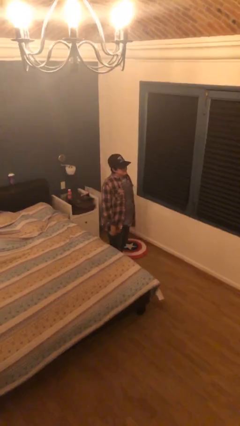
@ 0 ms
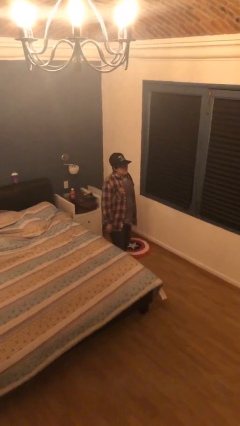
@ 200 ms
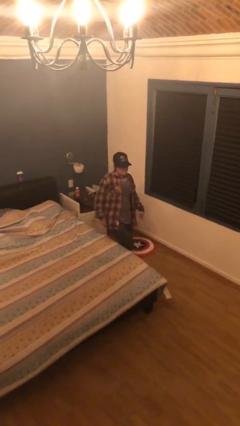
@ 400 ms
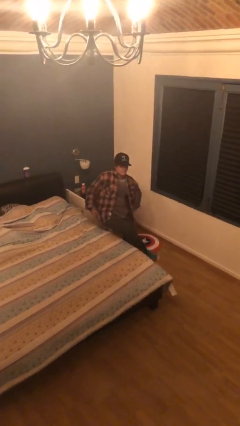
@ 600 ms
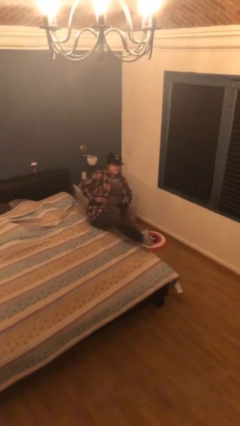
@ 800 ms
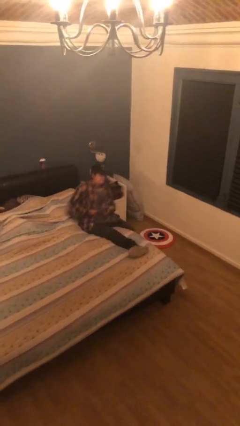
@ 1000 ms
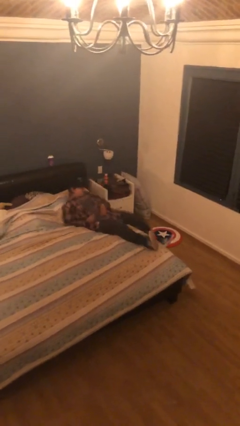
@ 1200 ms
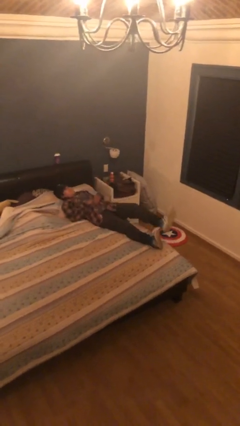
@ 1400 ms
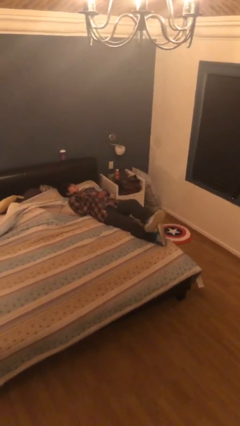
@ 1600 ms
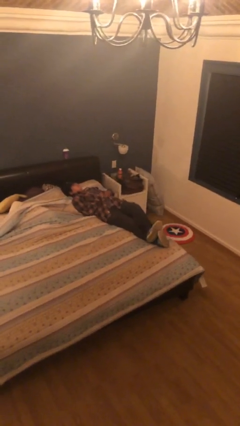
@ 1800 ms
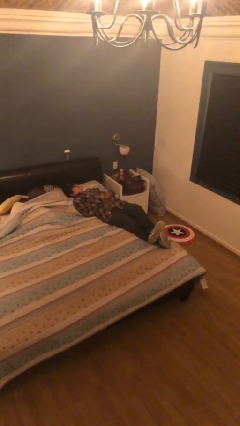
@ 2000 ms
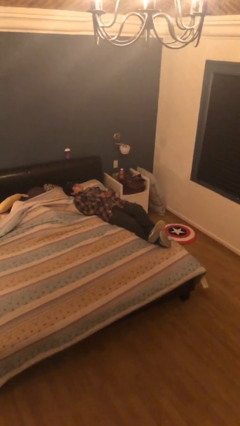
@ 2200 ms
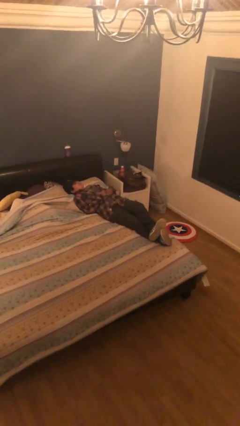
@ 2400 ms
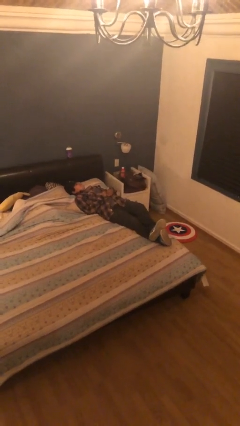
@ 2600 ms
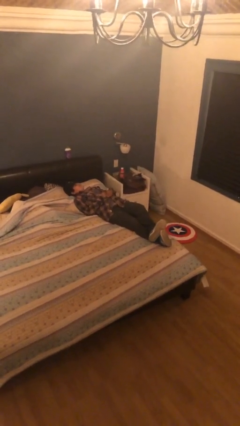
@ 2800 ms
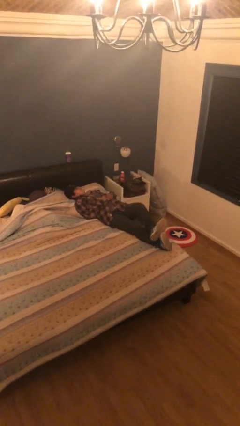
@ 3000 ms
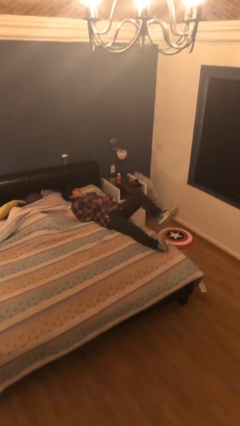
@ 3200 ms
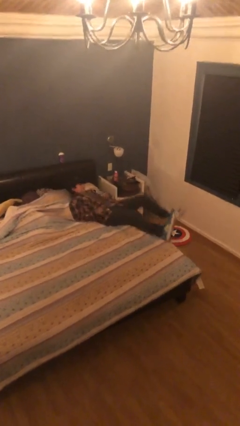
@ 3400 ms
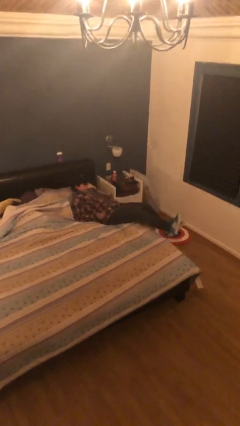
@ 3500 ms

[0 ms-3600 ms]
person lies down on bed

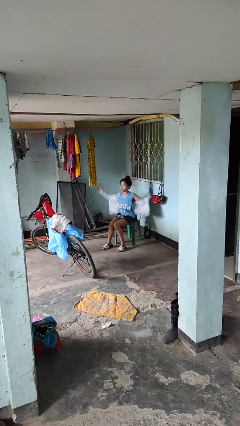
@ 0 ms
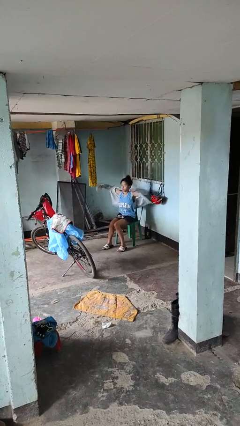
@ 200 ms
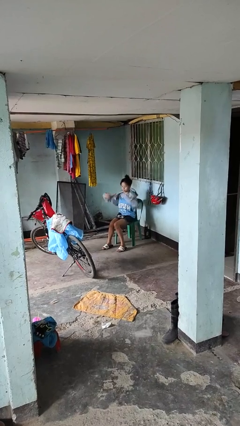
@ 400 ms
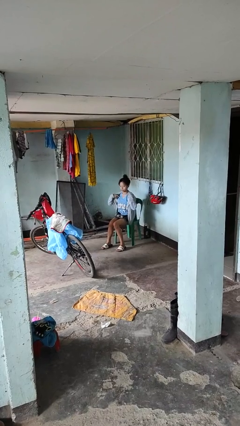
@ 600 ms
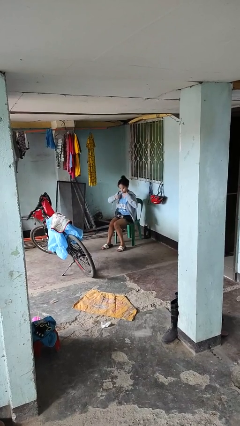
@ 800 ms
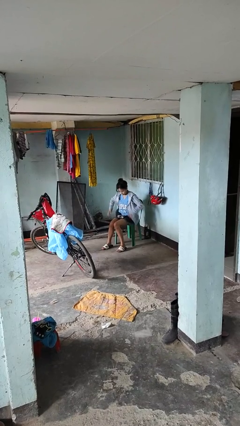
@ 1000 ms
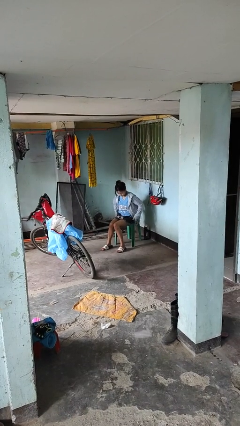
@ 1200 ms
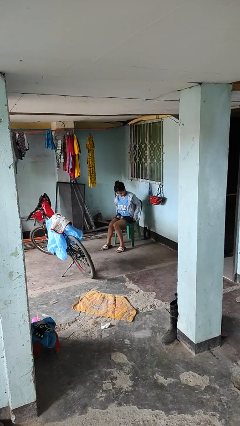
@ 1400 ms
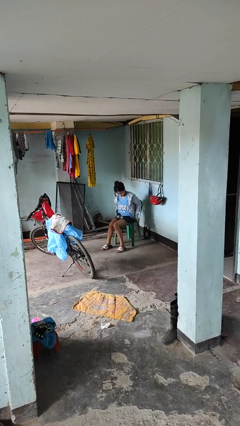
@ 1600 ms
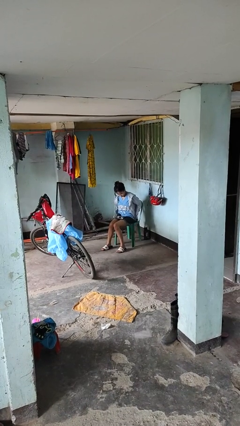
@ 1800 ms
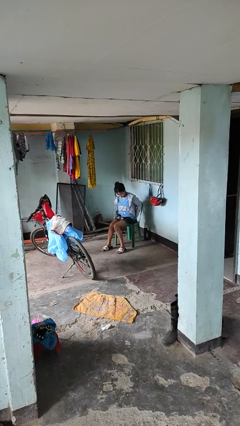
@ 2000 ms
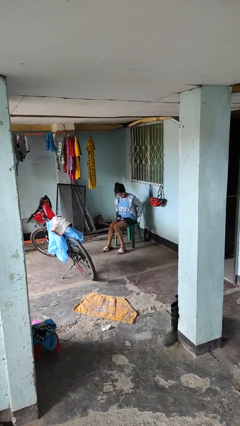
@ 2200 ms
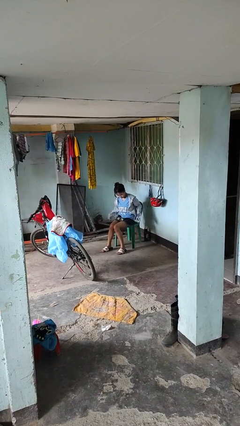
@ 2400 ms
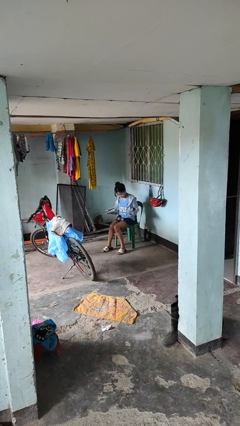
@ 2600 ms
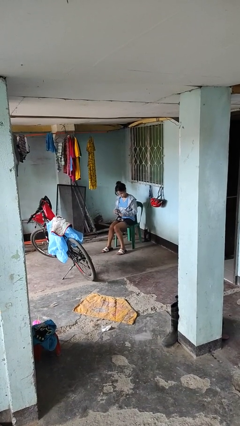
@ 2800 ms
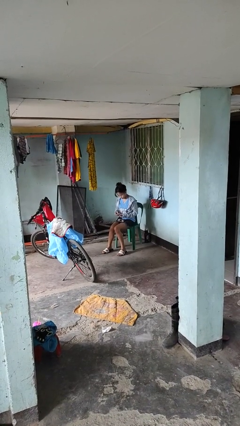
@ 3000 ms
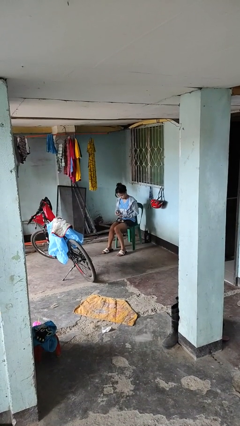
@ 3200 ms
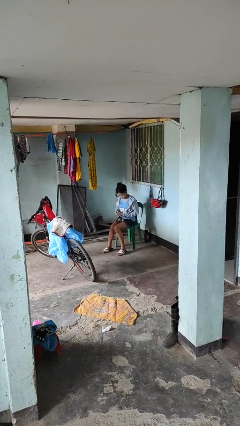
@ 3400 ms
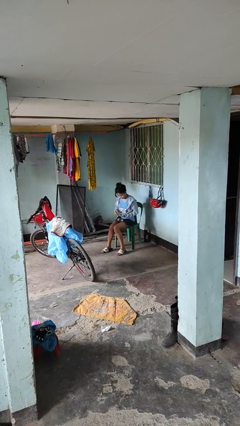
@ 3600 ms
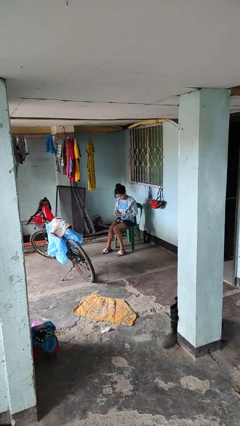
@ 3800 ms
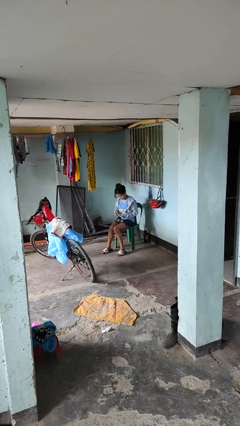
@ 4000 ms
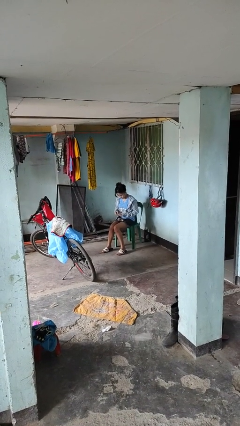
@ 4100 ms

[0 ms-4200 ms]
person puts on jacket

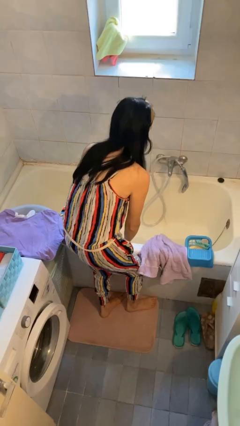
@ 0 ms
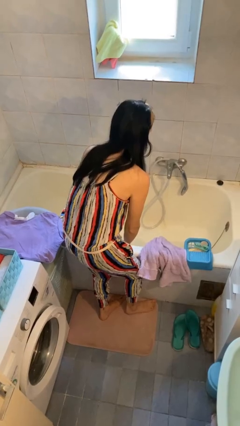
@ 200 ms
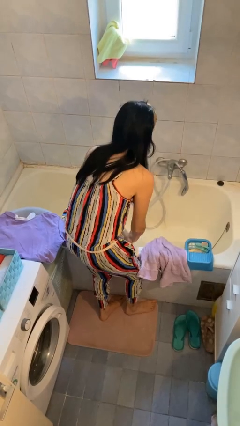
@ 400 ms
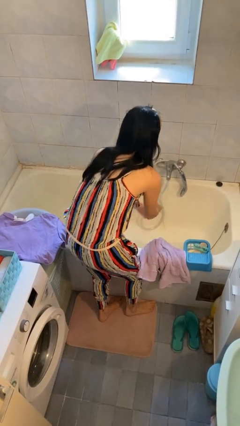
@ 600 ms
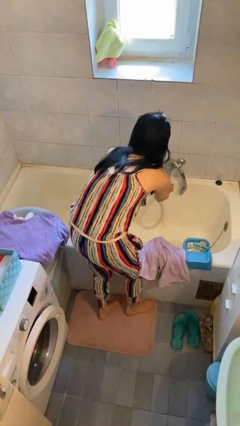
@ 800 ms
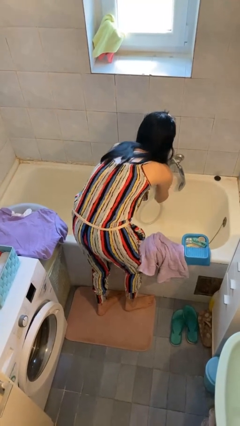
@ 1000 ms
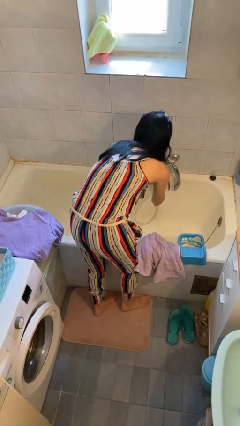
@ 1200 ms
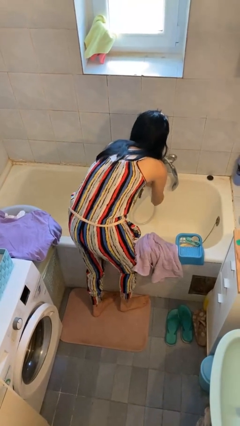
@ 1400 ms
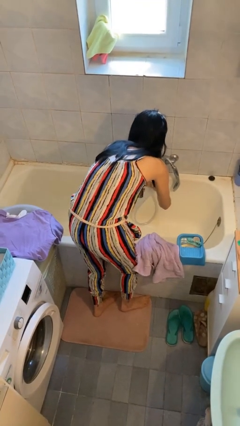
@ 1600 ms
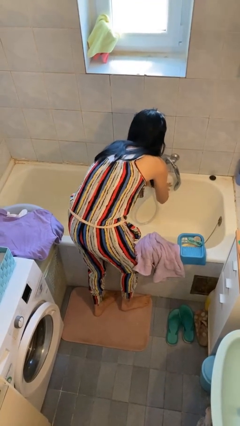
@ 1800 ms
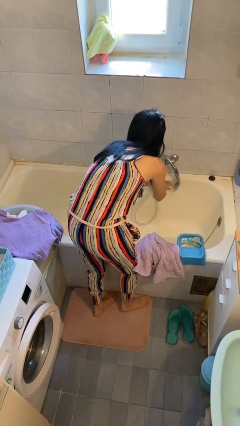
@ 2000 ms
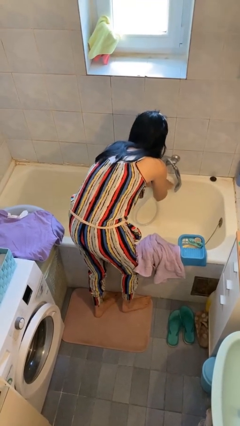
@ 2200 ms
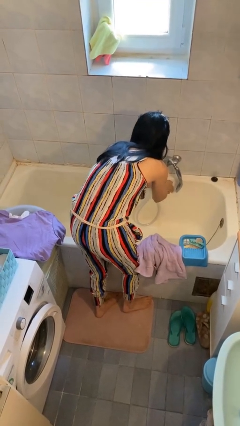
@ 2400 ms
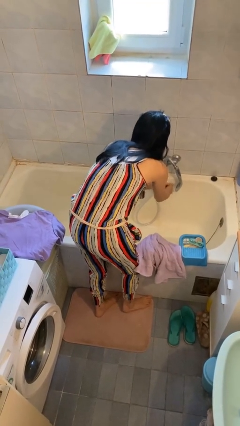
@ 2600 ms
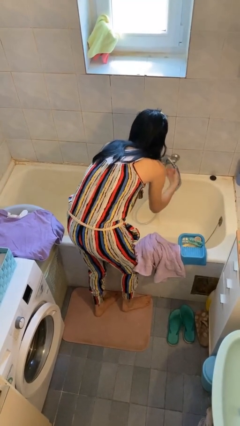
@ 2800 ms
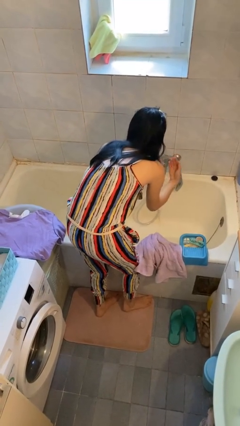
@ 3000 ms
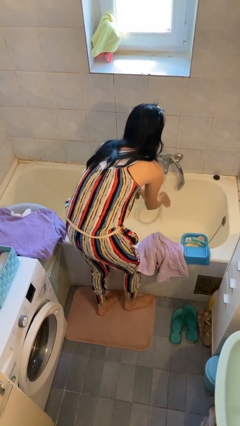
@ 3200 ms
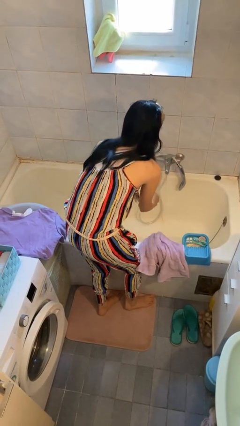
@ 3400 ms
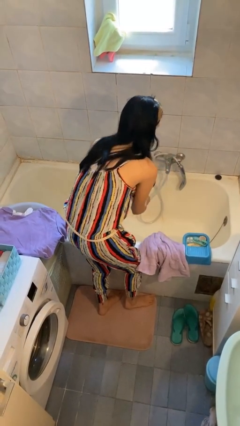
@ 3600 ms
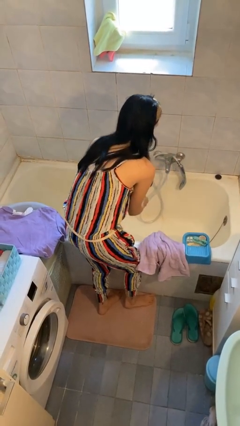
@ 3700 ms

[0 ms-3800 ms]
person washes hands

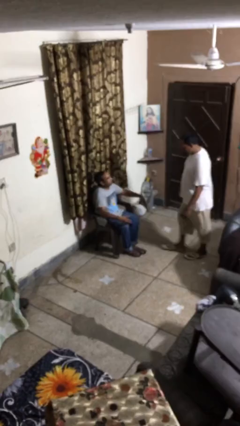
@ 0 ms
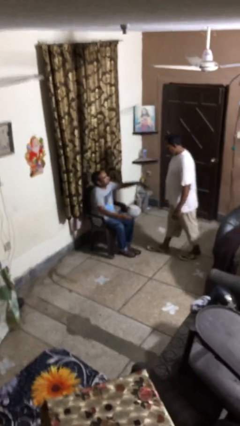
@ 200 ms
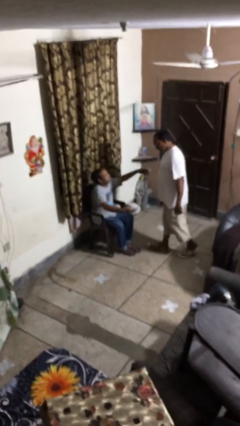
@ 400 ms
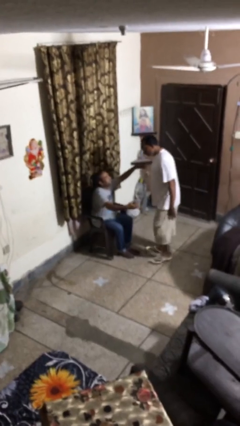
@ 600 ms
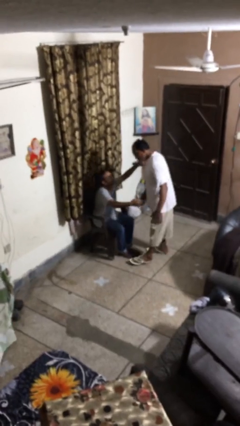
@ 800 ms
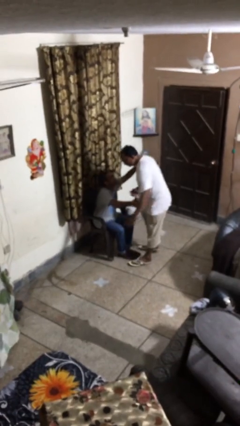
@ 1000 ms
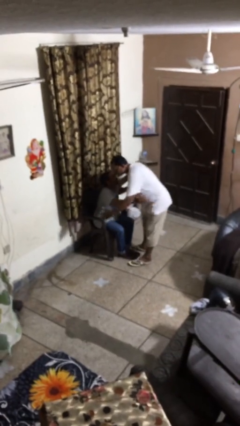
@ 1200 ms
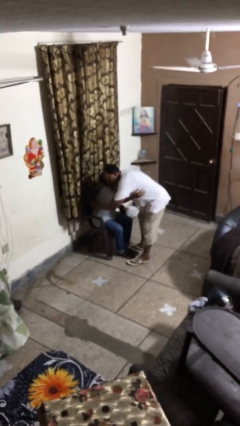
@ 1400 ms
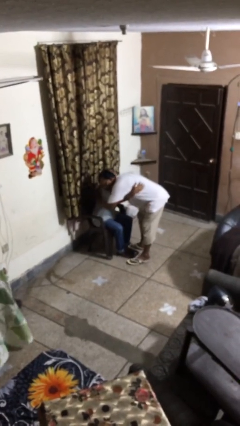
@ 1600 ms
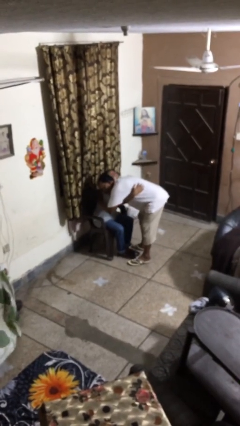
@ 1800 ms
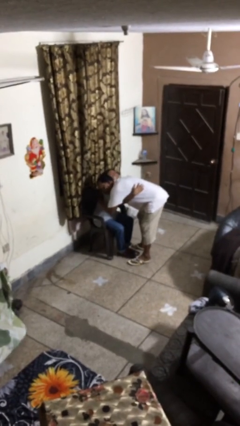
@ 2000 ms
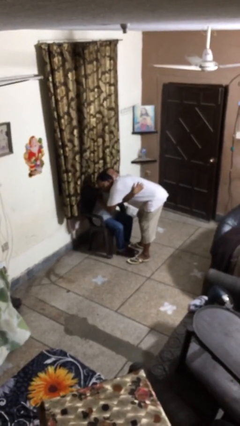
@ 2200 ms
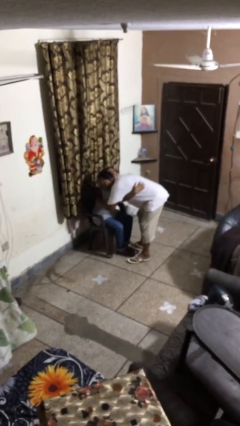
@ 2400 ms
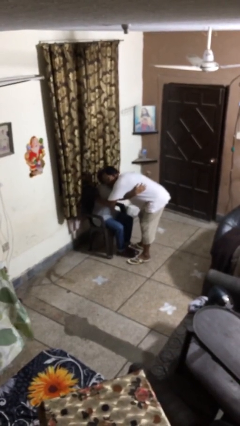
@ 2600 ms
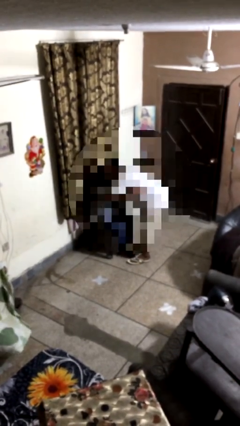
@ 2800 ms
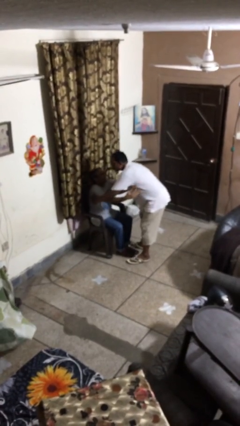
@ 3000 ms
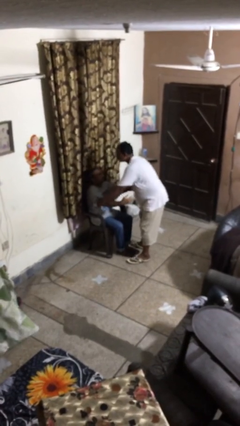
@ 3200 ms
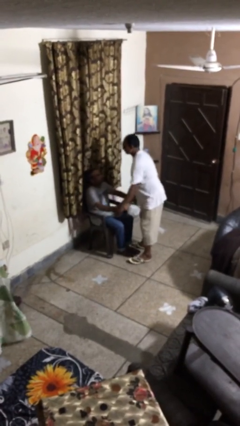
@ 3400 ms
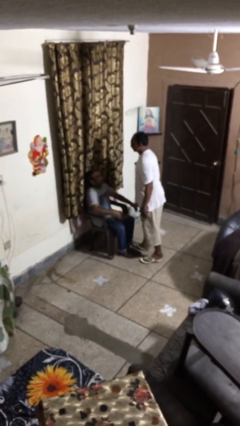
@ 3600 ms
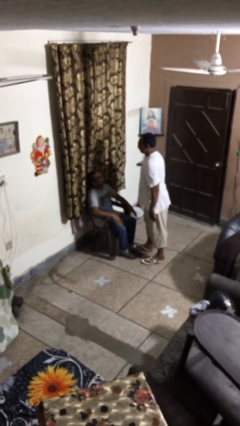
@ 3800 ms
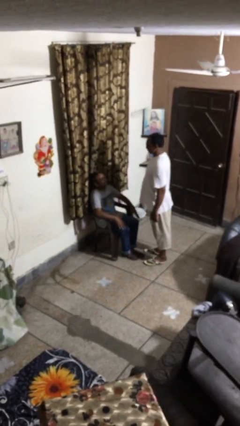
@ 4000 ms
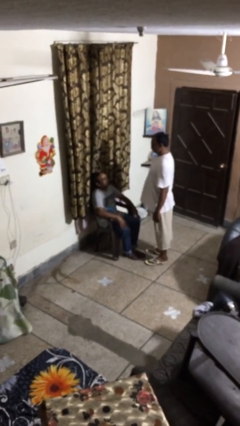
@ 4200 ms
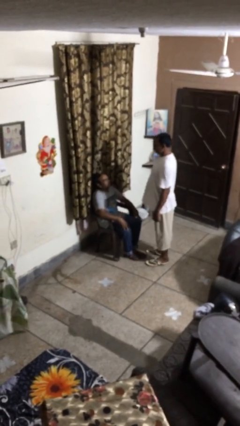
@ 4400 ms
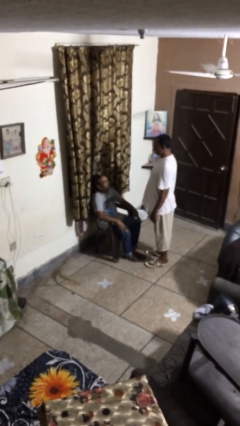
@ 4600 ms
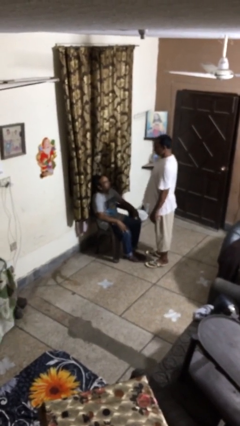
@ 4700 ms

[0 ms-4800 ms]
person embraces person

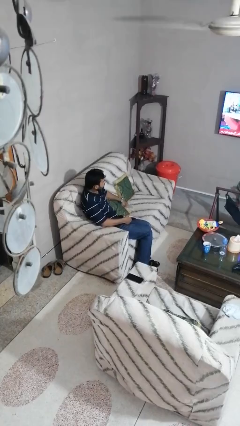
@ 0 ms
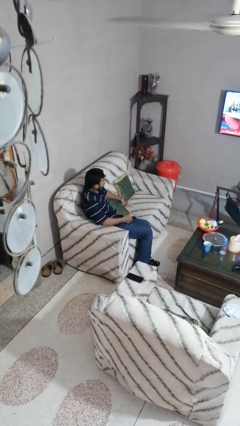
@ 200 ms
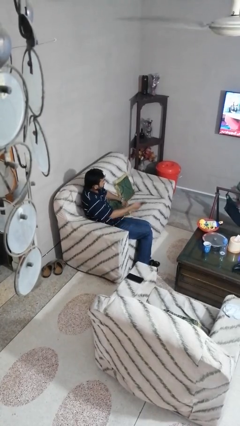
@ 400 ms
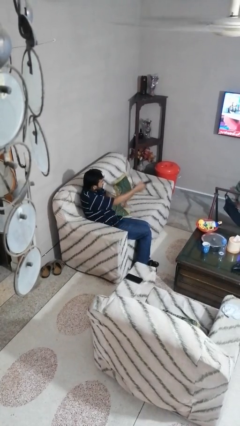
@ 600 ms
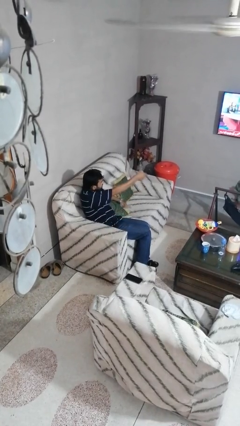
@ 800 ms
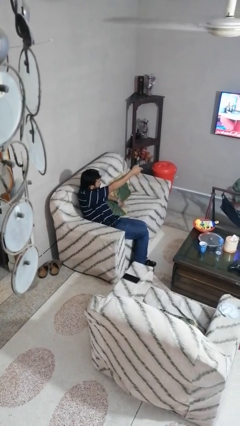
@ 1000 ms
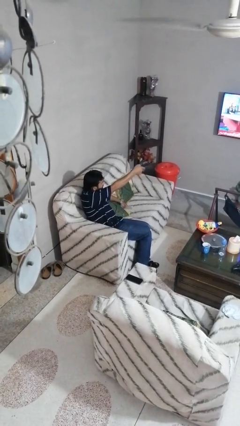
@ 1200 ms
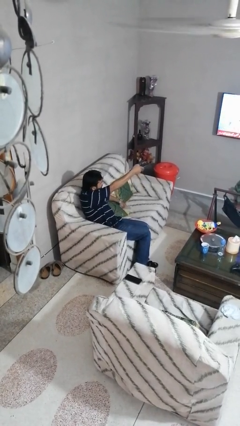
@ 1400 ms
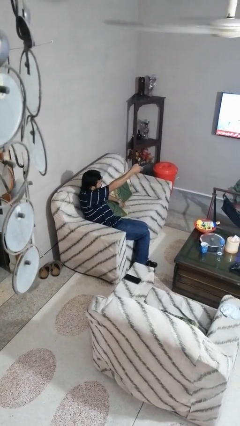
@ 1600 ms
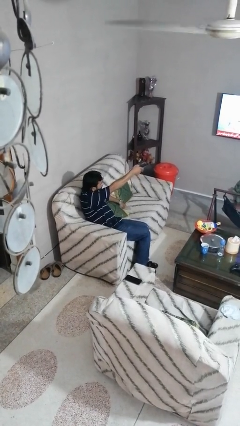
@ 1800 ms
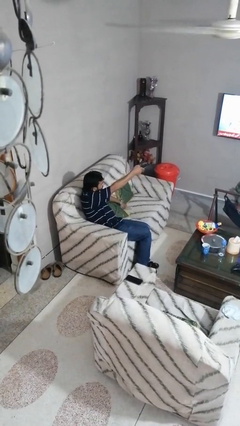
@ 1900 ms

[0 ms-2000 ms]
person uses television remote
